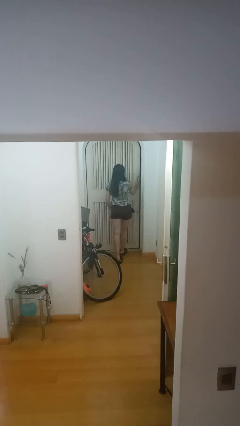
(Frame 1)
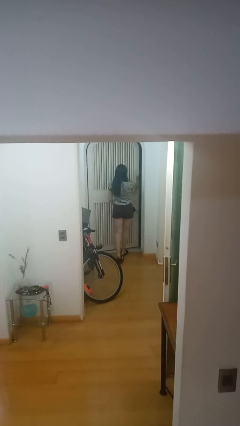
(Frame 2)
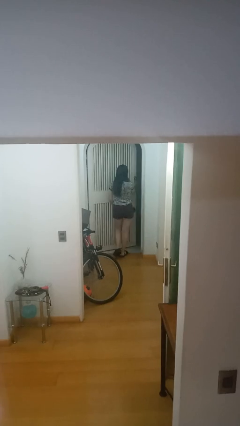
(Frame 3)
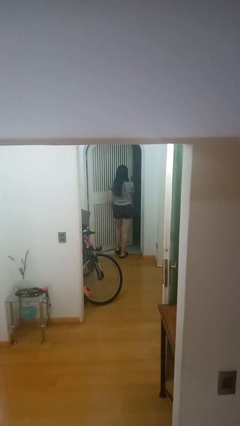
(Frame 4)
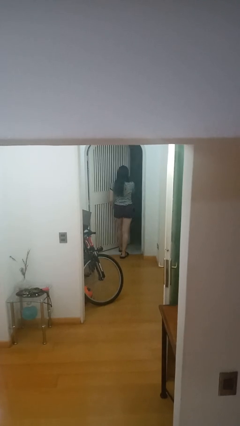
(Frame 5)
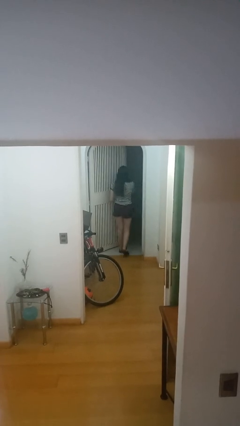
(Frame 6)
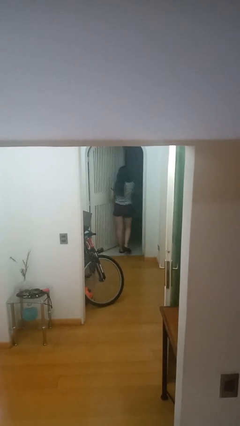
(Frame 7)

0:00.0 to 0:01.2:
person opens facility door

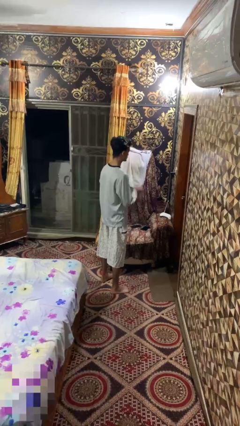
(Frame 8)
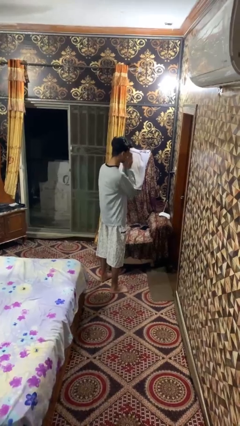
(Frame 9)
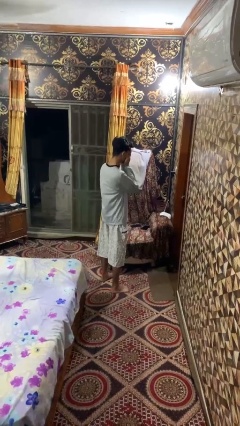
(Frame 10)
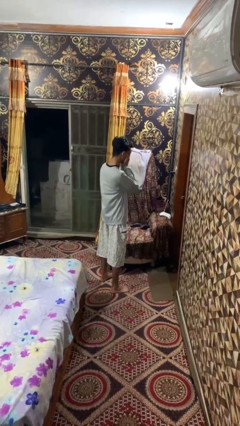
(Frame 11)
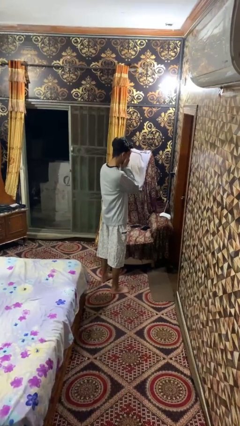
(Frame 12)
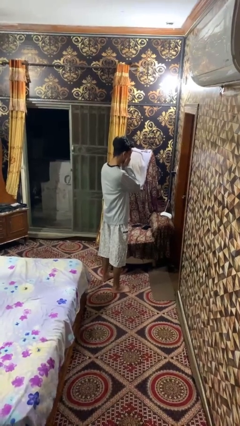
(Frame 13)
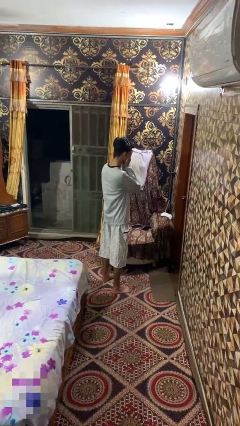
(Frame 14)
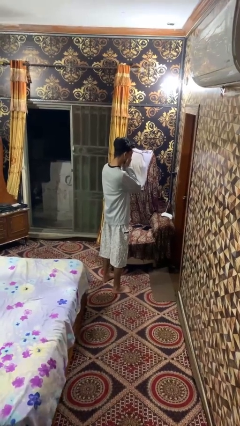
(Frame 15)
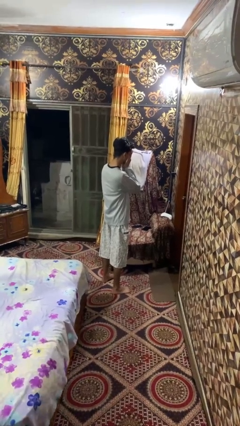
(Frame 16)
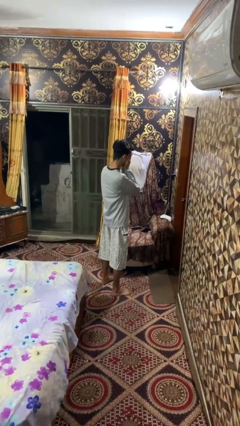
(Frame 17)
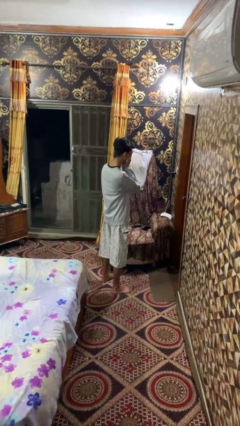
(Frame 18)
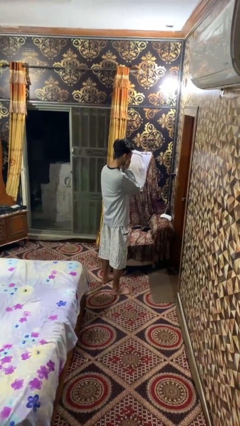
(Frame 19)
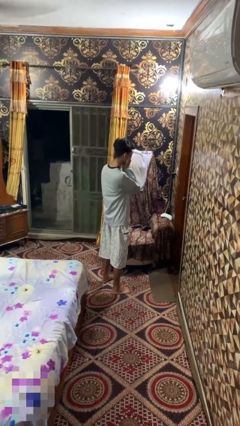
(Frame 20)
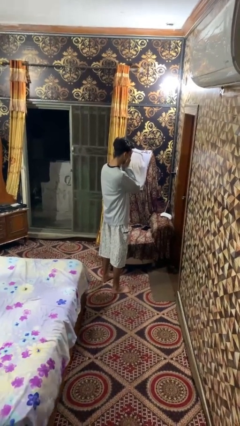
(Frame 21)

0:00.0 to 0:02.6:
person covers face with hands

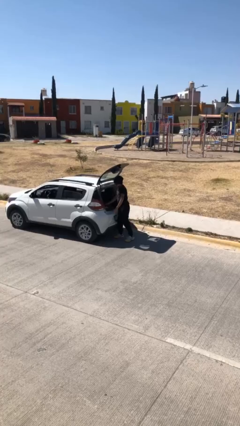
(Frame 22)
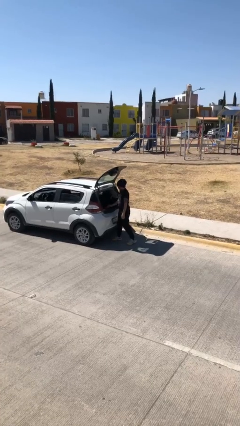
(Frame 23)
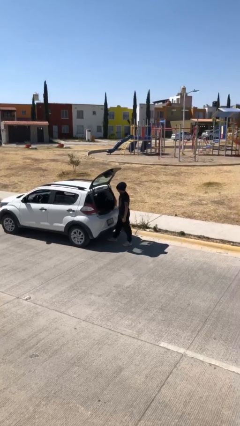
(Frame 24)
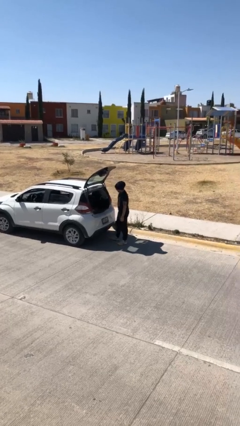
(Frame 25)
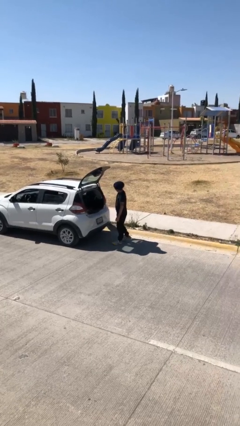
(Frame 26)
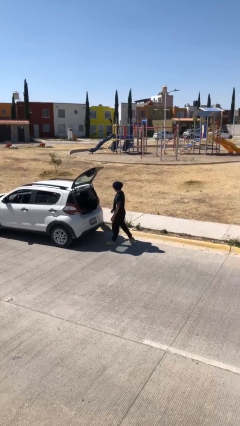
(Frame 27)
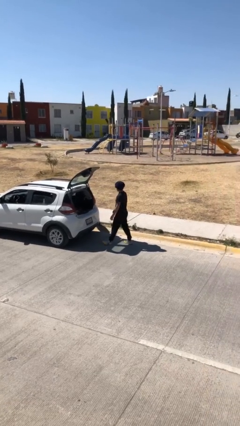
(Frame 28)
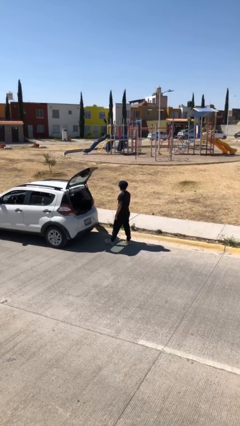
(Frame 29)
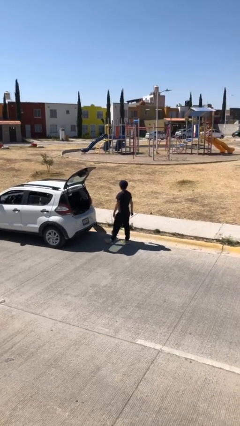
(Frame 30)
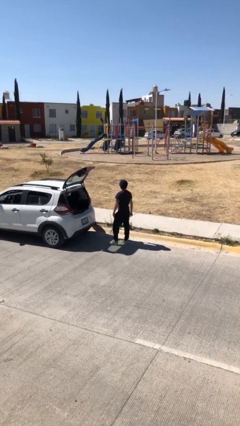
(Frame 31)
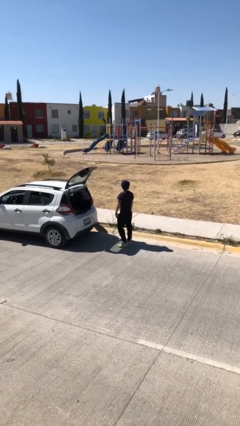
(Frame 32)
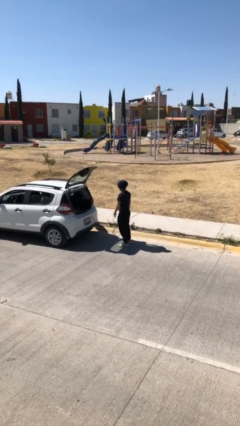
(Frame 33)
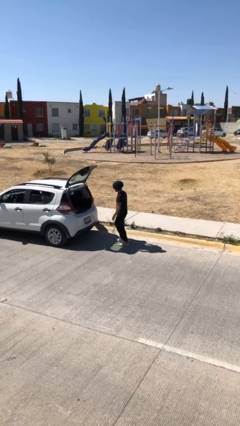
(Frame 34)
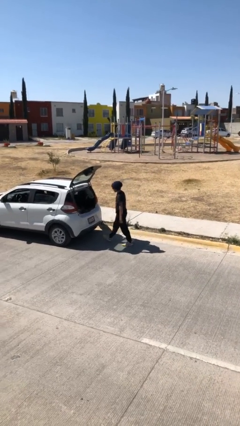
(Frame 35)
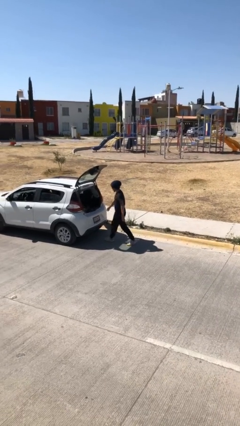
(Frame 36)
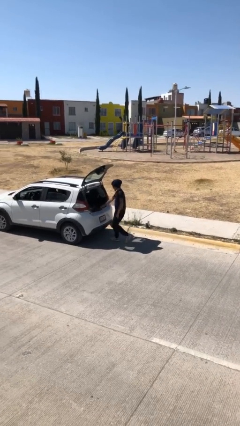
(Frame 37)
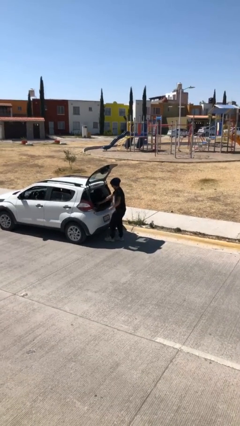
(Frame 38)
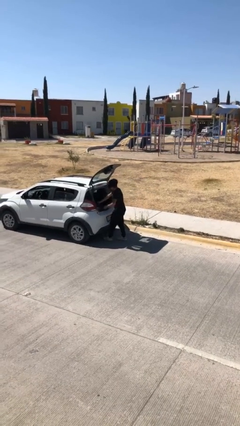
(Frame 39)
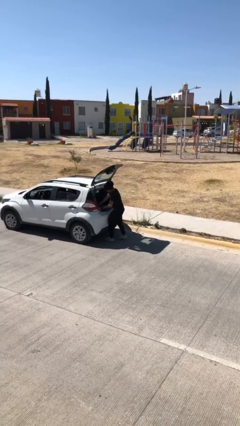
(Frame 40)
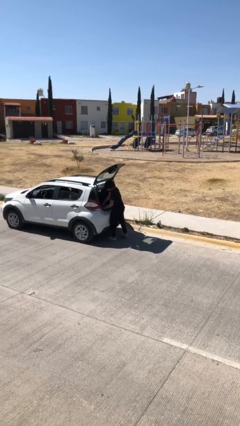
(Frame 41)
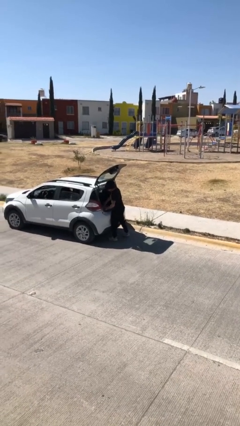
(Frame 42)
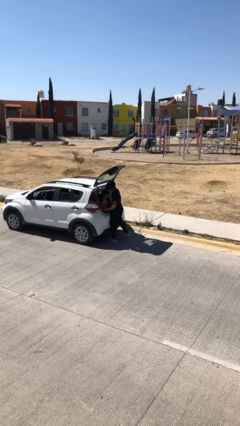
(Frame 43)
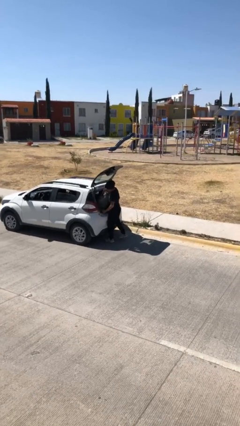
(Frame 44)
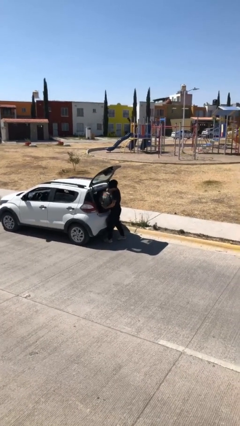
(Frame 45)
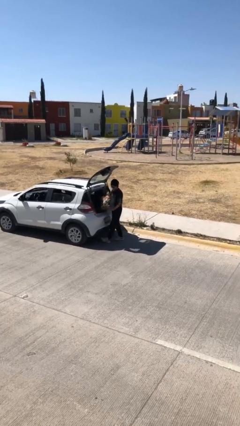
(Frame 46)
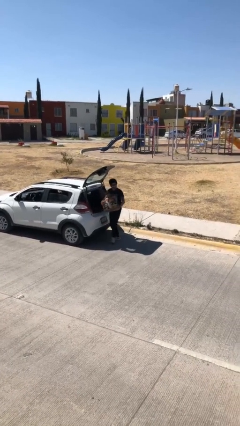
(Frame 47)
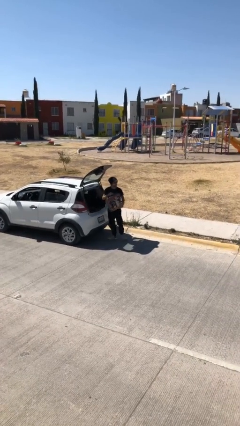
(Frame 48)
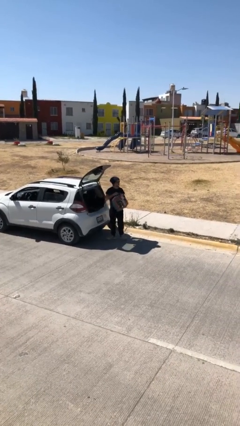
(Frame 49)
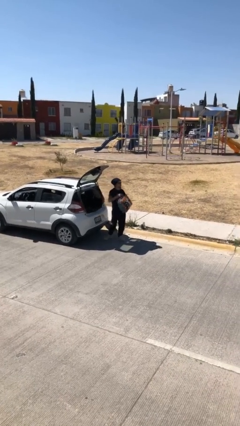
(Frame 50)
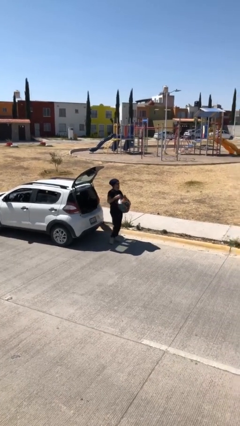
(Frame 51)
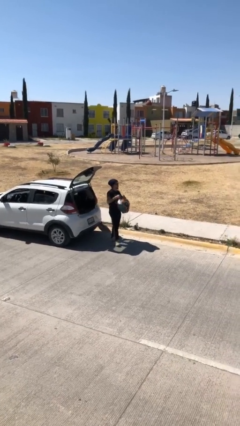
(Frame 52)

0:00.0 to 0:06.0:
person unloads car

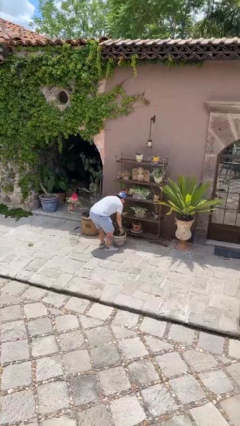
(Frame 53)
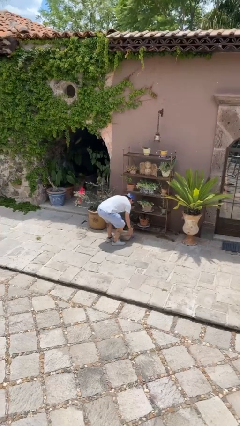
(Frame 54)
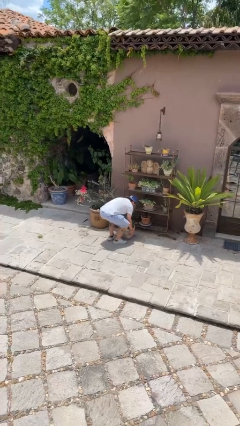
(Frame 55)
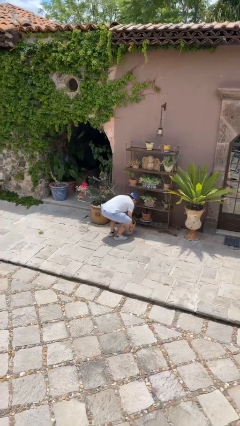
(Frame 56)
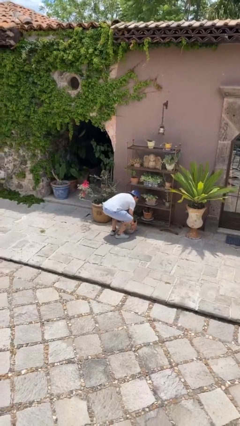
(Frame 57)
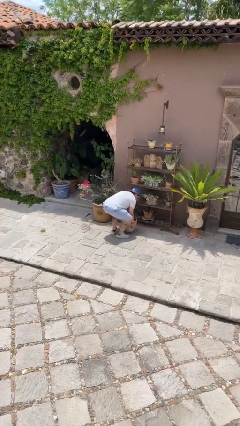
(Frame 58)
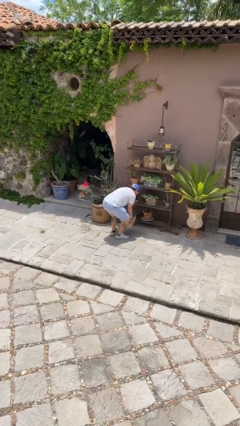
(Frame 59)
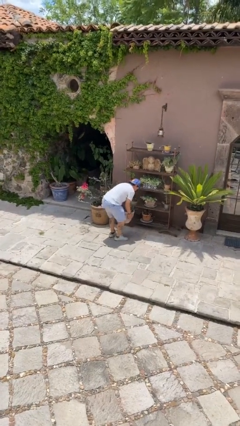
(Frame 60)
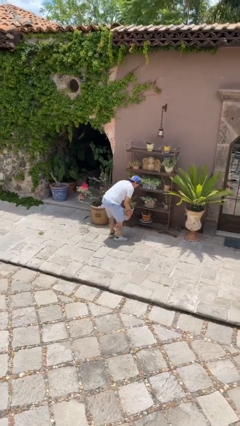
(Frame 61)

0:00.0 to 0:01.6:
person picks up object from floor

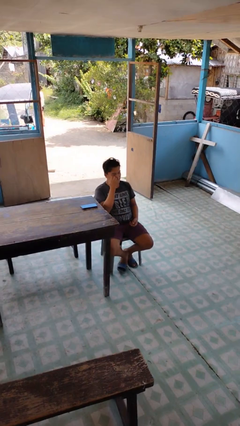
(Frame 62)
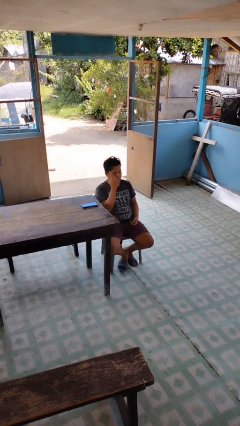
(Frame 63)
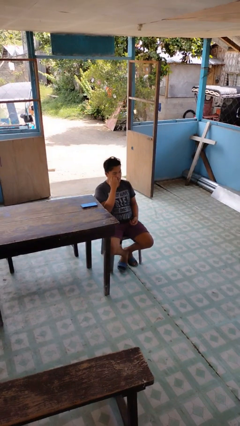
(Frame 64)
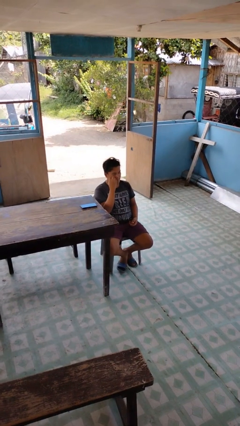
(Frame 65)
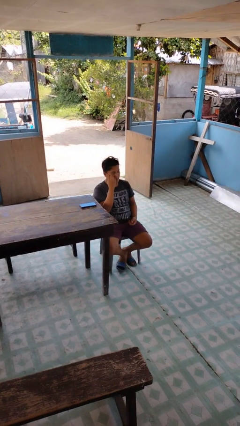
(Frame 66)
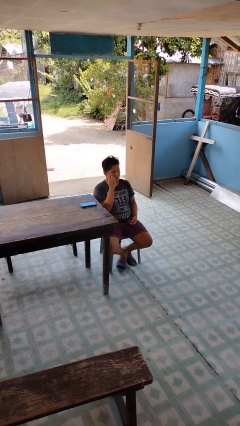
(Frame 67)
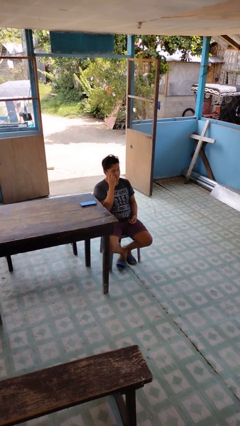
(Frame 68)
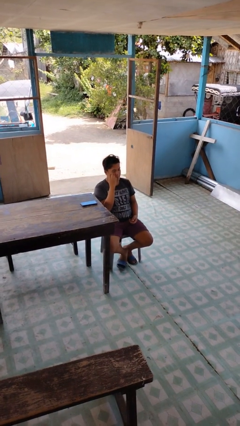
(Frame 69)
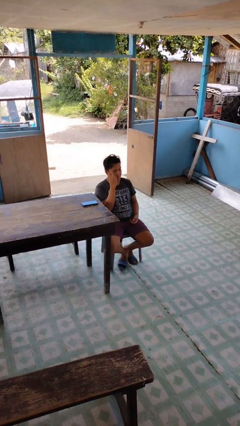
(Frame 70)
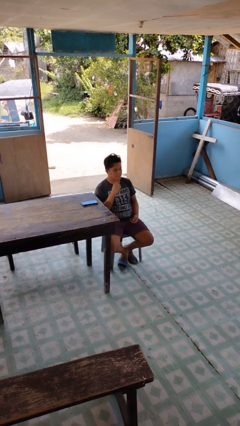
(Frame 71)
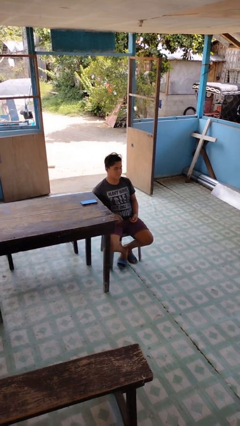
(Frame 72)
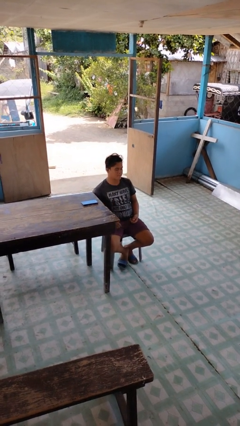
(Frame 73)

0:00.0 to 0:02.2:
person scratches face

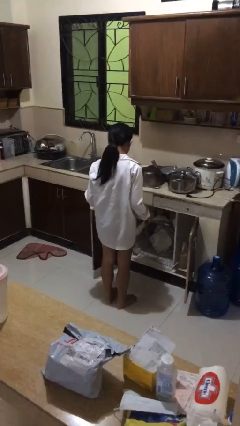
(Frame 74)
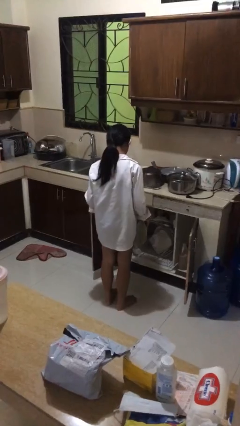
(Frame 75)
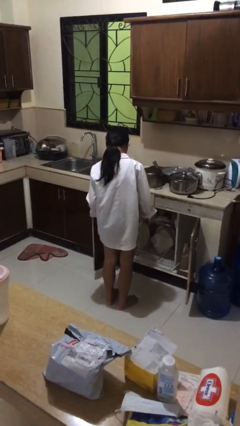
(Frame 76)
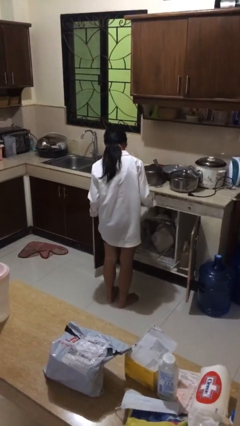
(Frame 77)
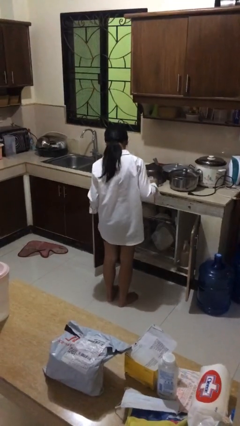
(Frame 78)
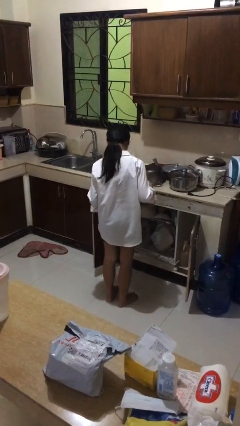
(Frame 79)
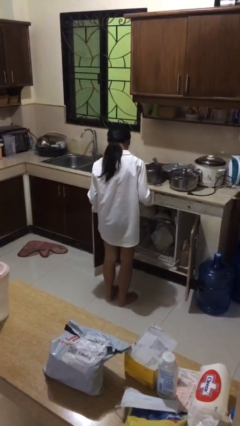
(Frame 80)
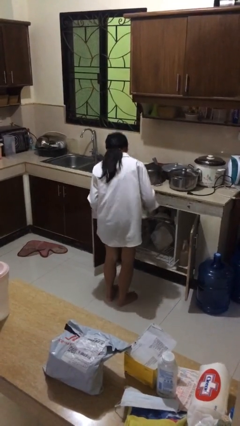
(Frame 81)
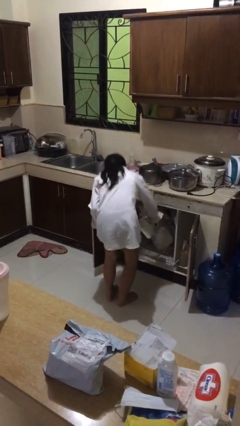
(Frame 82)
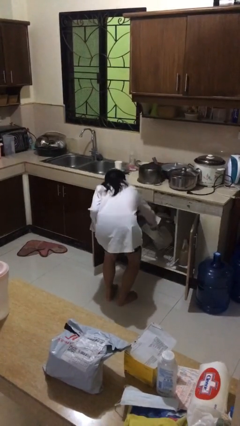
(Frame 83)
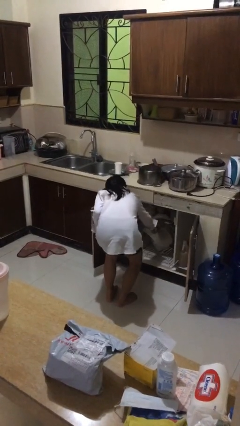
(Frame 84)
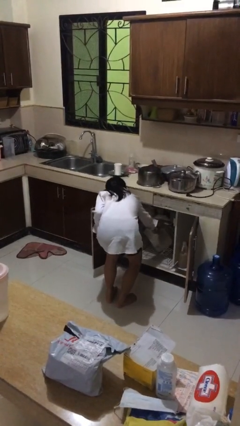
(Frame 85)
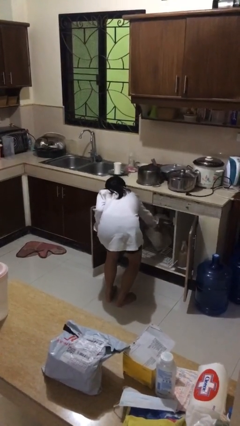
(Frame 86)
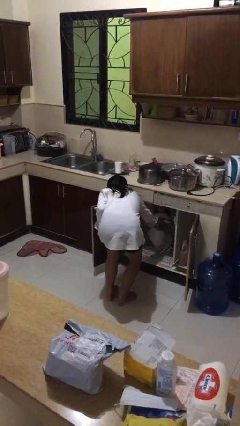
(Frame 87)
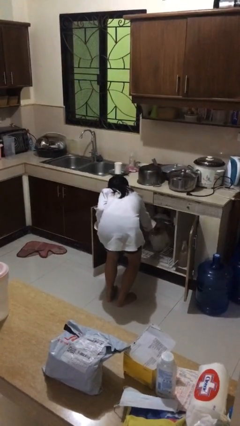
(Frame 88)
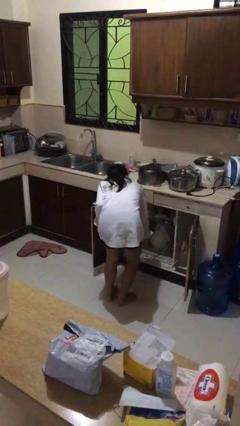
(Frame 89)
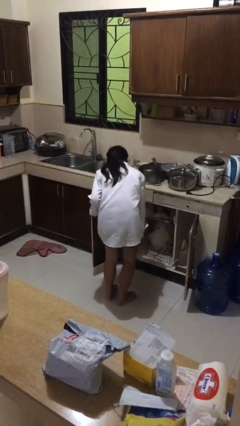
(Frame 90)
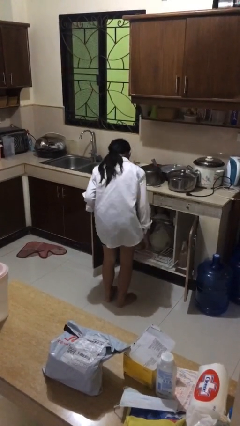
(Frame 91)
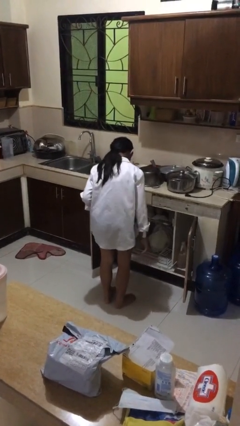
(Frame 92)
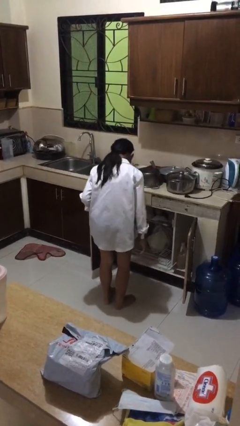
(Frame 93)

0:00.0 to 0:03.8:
person loads dishwasher

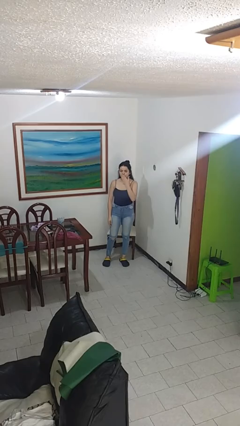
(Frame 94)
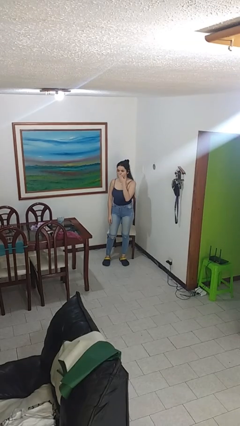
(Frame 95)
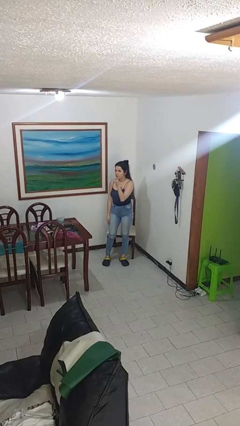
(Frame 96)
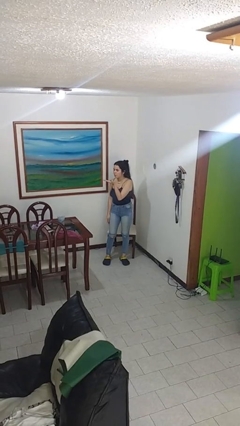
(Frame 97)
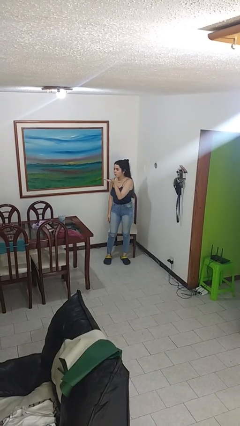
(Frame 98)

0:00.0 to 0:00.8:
person gestures blow kiss
